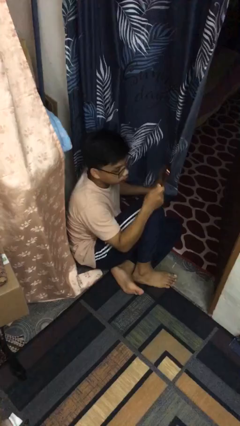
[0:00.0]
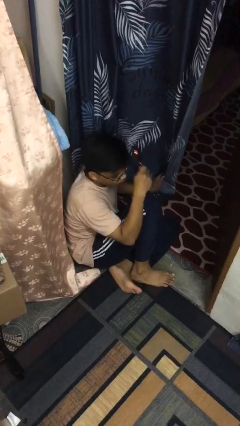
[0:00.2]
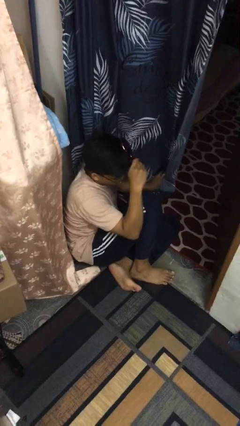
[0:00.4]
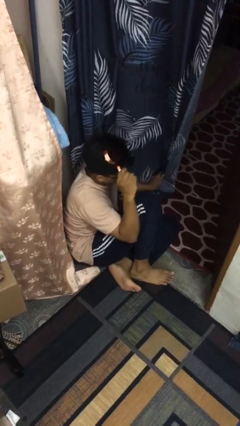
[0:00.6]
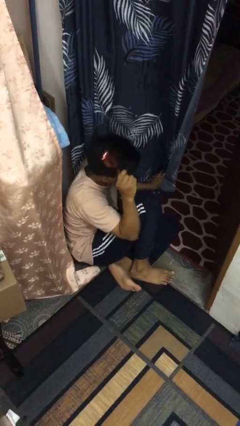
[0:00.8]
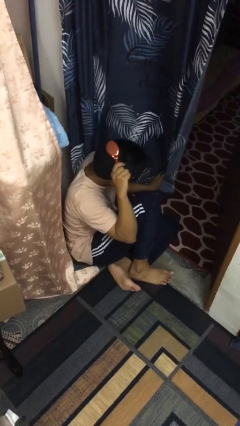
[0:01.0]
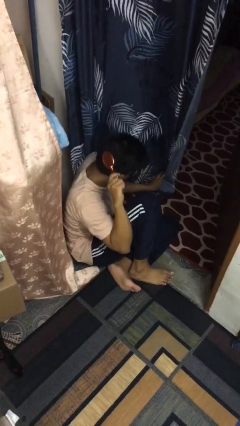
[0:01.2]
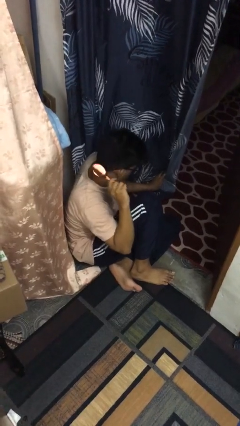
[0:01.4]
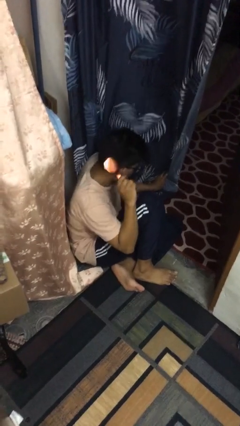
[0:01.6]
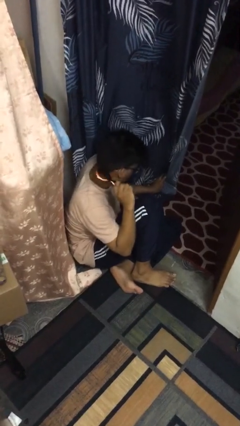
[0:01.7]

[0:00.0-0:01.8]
person brushes hair

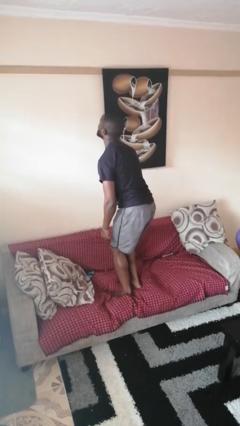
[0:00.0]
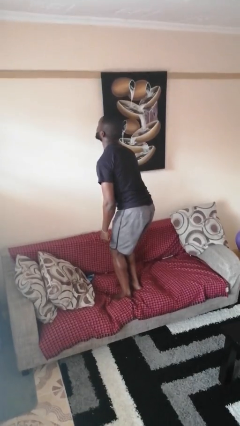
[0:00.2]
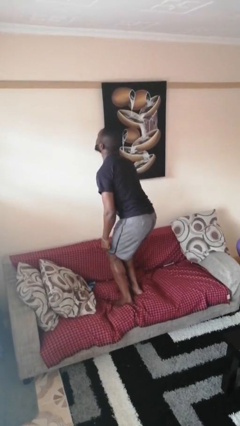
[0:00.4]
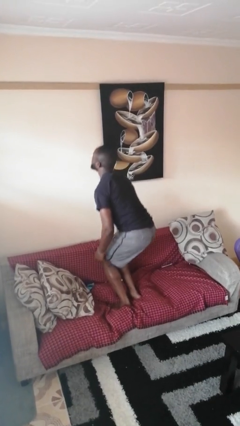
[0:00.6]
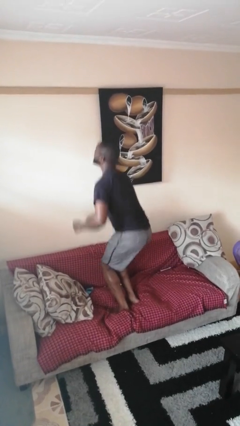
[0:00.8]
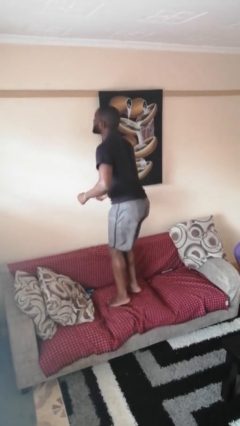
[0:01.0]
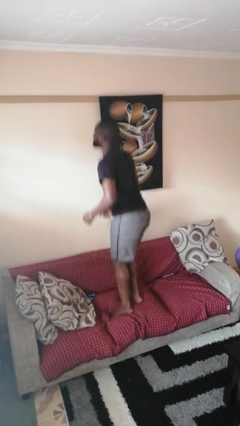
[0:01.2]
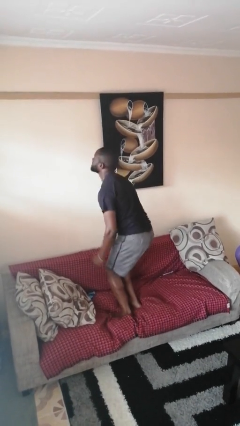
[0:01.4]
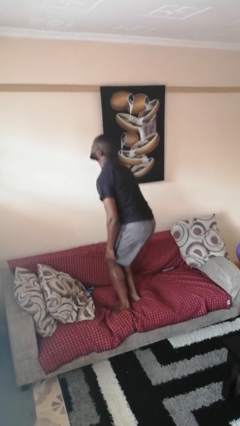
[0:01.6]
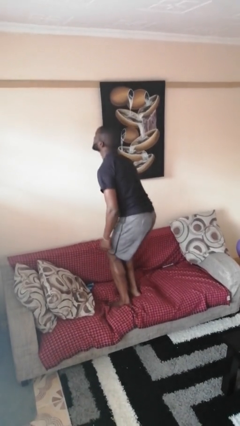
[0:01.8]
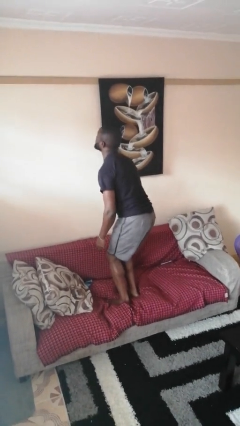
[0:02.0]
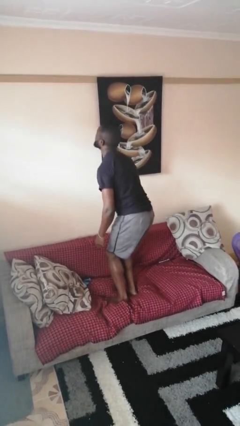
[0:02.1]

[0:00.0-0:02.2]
person jumps on couch

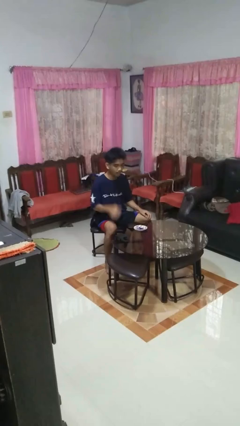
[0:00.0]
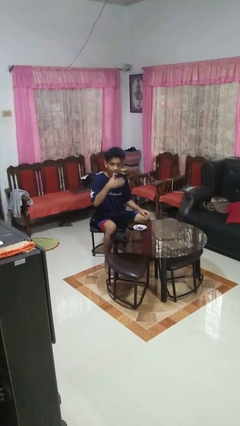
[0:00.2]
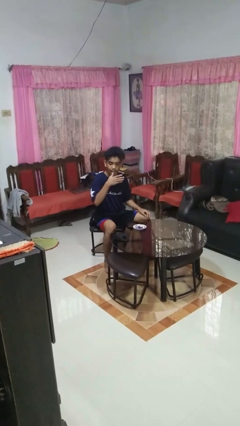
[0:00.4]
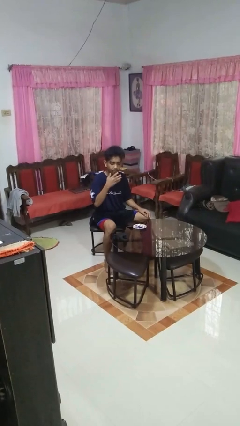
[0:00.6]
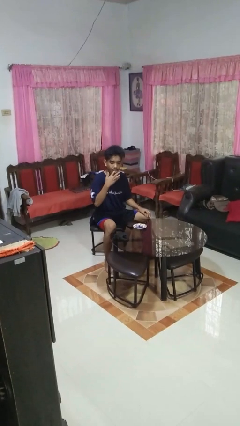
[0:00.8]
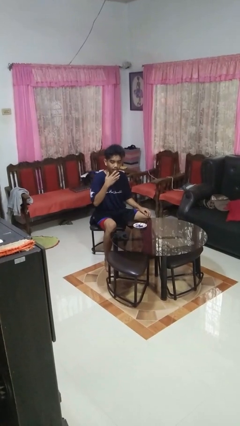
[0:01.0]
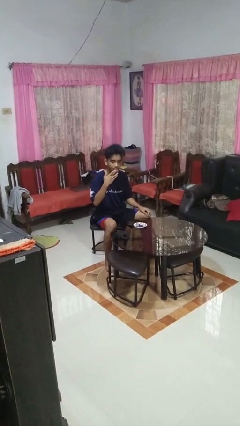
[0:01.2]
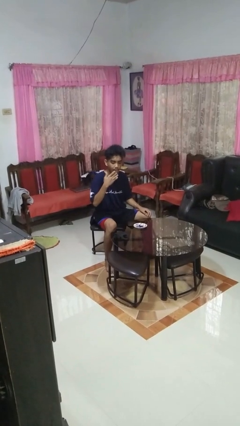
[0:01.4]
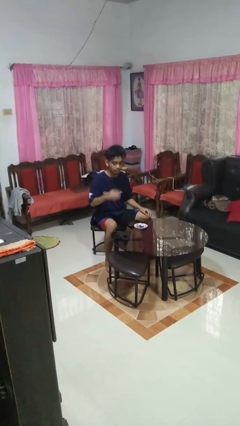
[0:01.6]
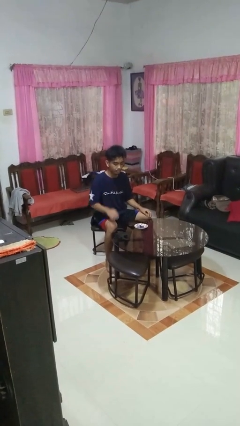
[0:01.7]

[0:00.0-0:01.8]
person licks fingers

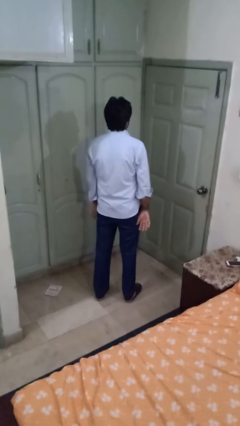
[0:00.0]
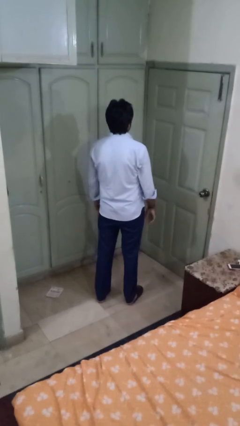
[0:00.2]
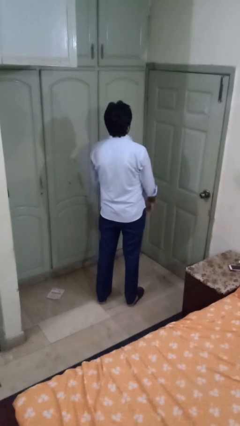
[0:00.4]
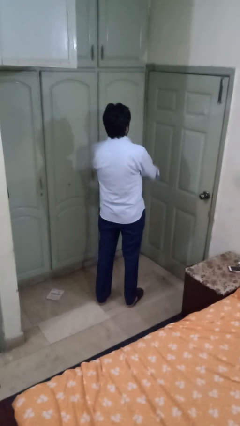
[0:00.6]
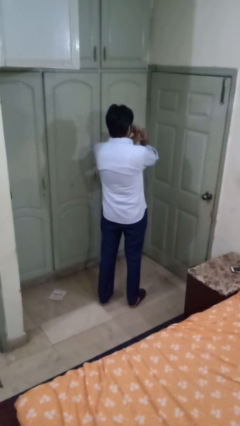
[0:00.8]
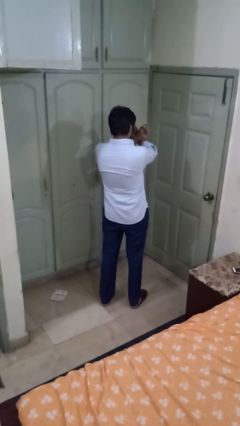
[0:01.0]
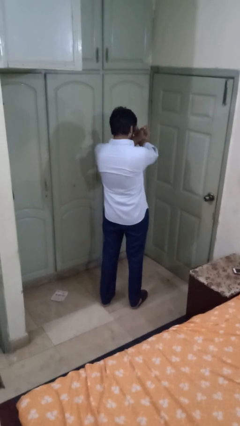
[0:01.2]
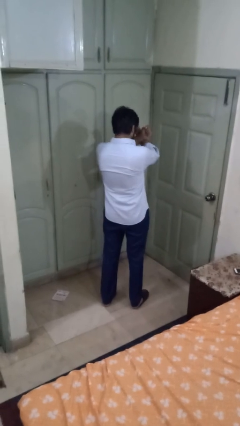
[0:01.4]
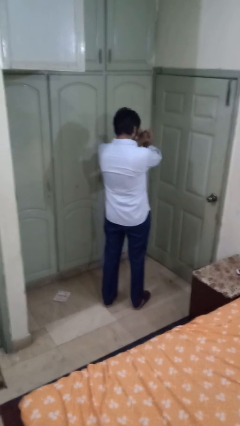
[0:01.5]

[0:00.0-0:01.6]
person gestures arms x

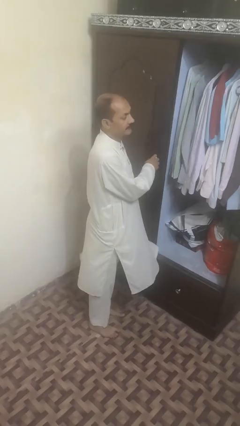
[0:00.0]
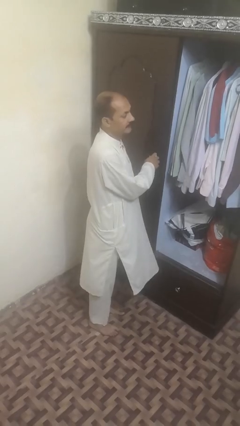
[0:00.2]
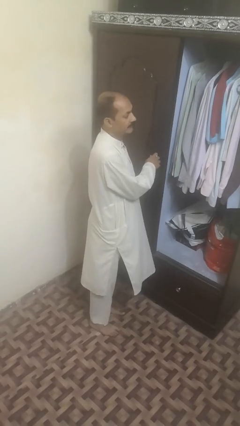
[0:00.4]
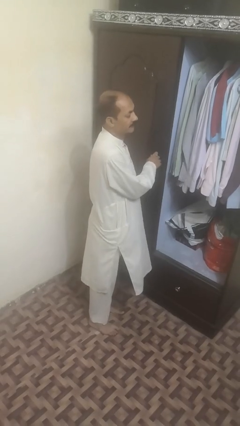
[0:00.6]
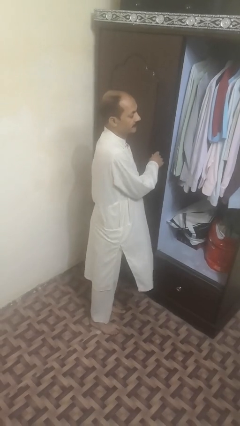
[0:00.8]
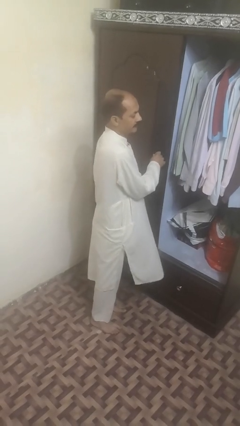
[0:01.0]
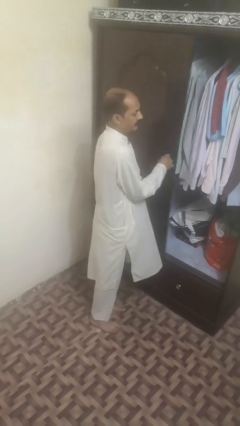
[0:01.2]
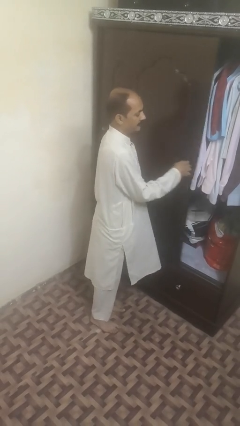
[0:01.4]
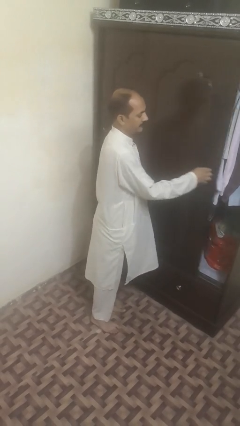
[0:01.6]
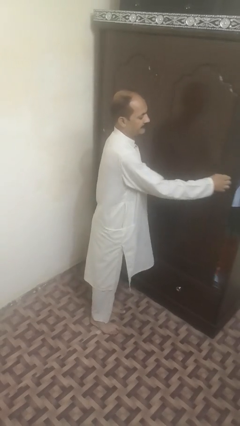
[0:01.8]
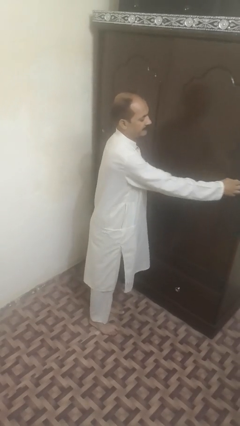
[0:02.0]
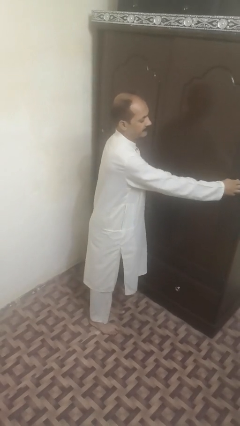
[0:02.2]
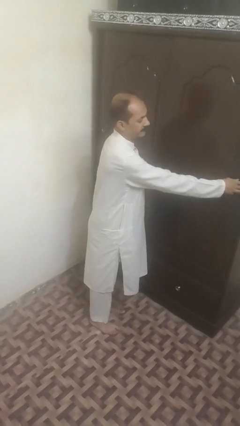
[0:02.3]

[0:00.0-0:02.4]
person closes sliding door

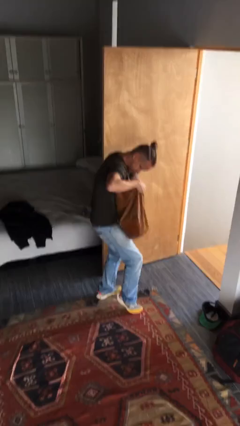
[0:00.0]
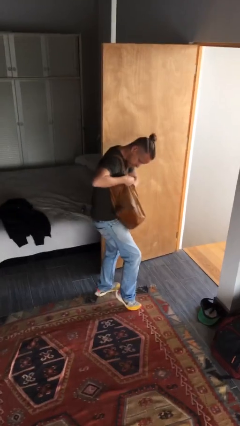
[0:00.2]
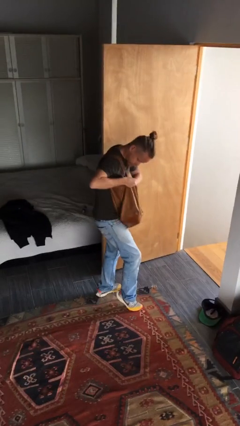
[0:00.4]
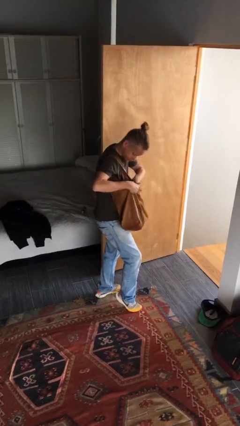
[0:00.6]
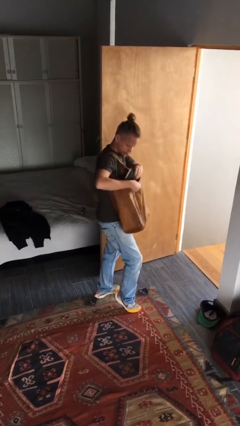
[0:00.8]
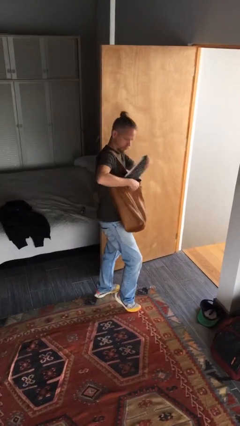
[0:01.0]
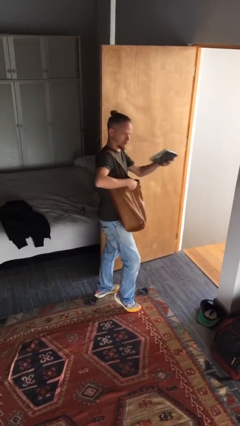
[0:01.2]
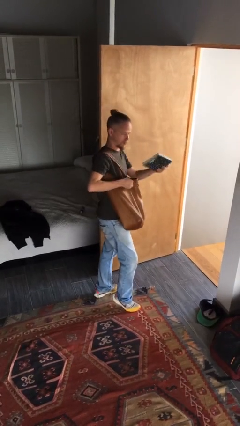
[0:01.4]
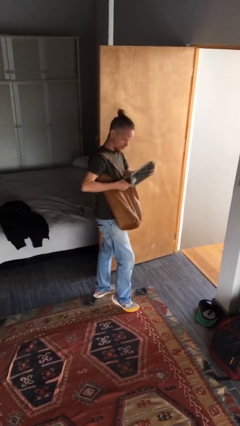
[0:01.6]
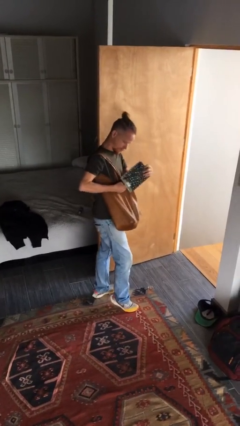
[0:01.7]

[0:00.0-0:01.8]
person takes object from purse

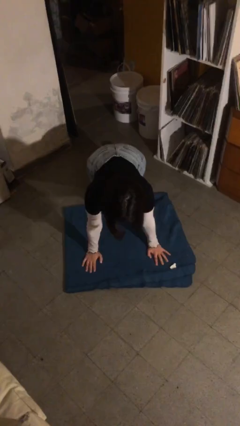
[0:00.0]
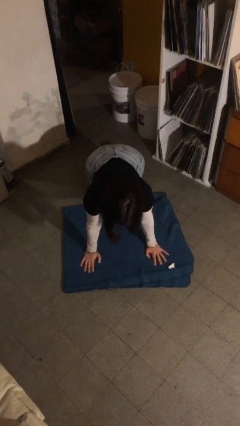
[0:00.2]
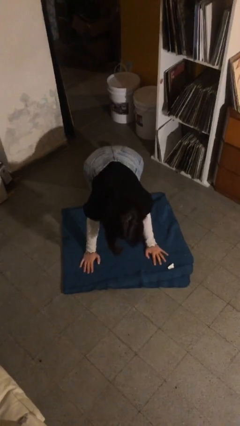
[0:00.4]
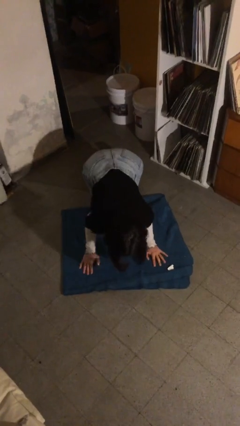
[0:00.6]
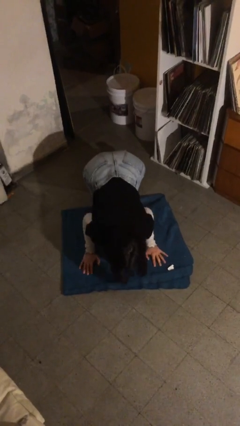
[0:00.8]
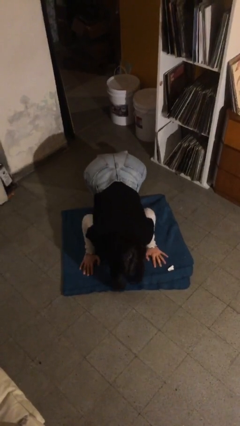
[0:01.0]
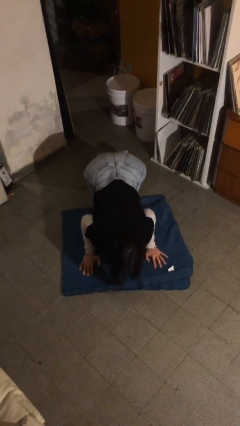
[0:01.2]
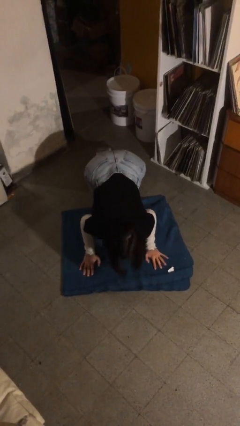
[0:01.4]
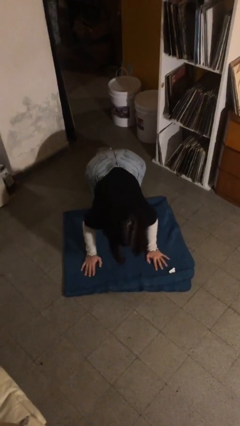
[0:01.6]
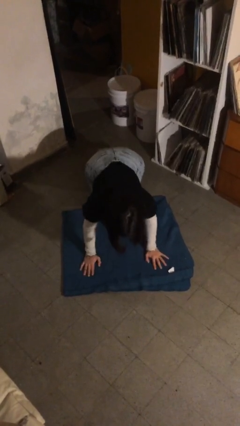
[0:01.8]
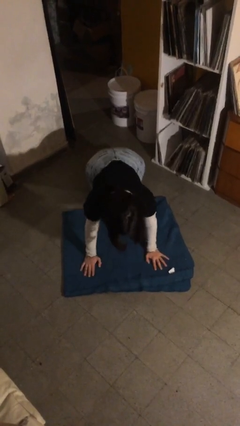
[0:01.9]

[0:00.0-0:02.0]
person exercises with pushup

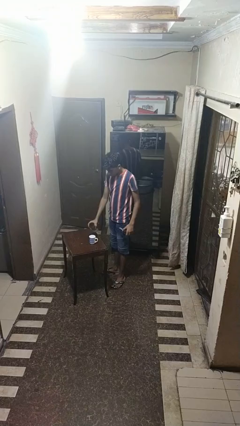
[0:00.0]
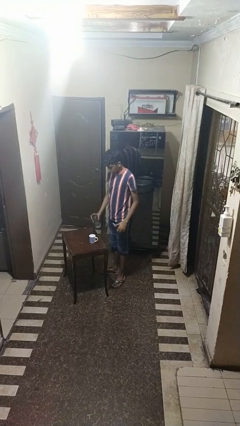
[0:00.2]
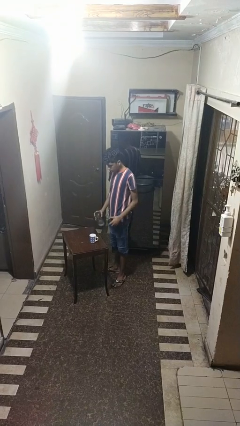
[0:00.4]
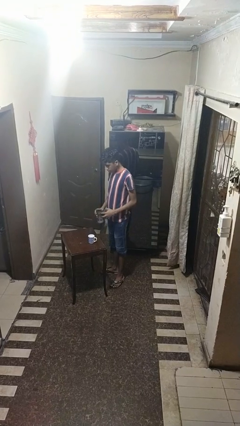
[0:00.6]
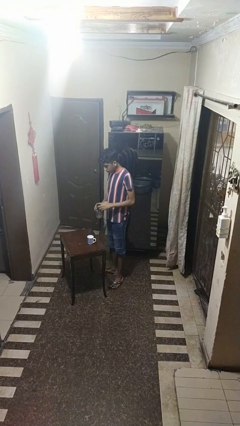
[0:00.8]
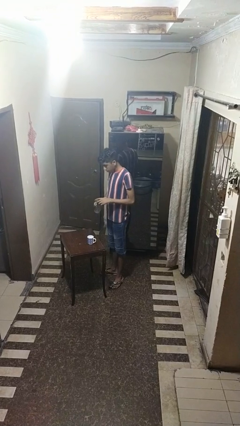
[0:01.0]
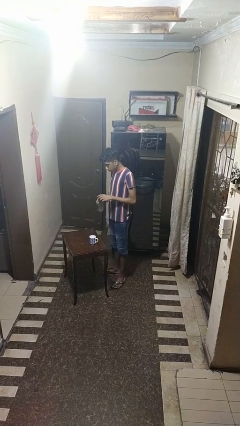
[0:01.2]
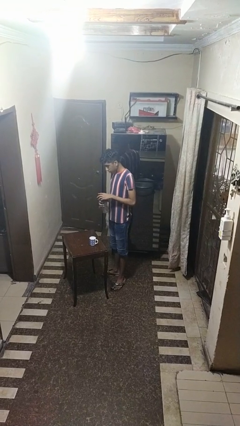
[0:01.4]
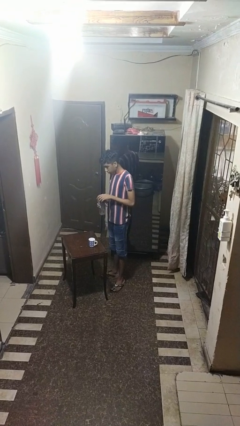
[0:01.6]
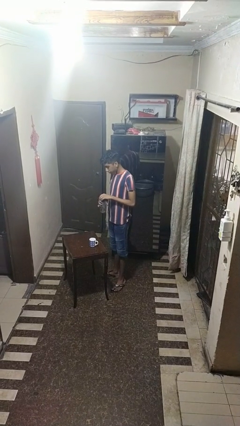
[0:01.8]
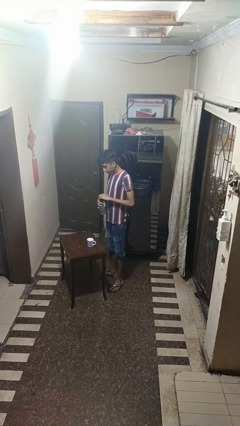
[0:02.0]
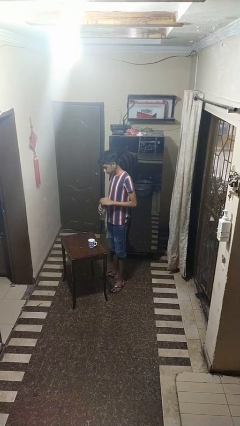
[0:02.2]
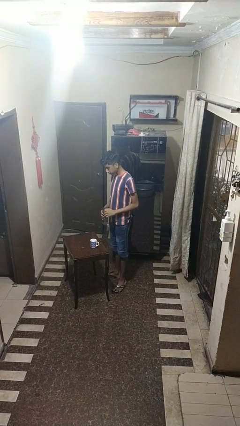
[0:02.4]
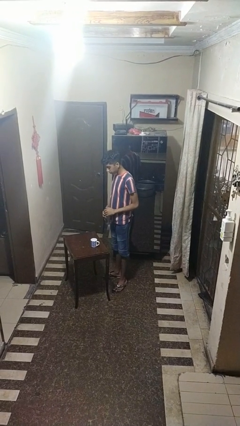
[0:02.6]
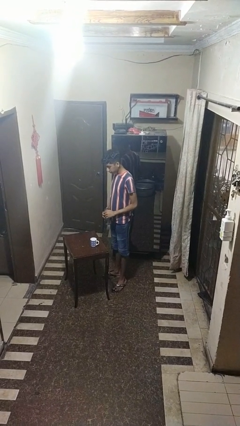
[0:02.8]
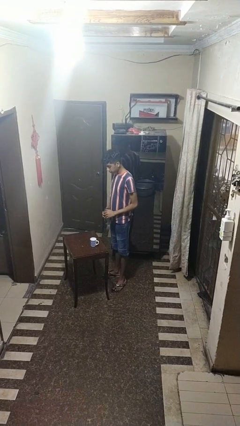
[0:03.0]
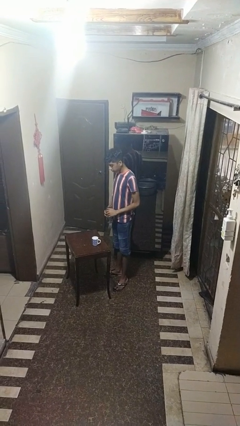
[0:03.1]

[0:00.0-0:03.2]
person screws lid to bottle
